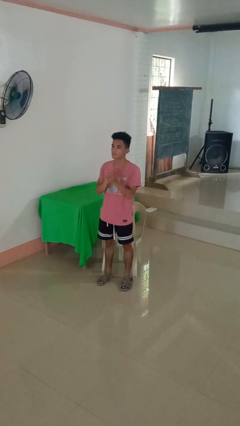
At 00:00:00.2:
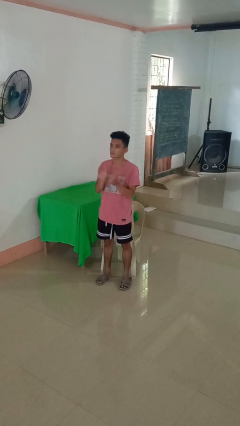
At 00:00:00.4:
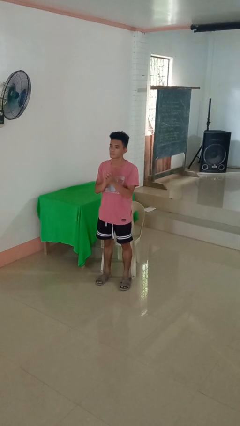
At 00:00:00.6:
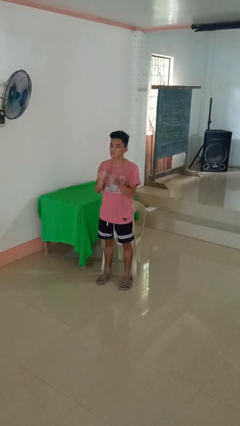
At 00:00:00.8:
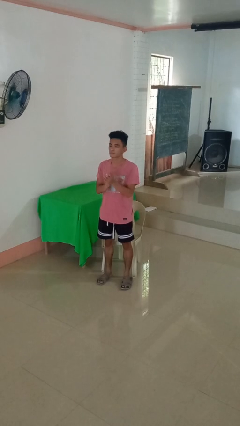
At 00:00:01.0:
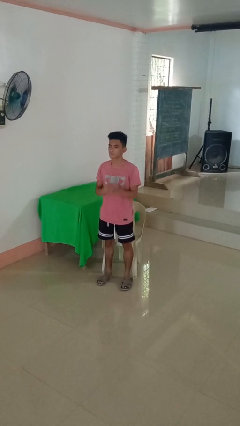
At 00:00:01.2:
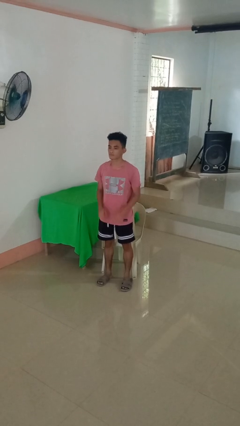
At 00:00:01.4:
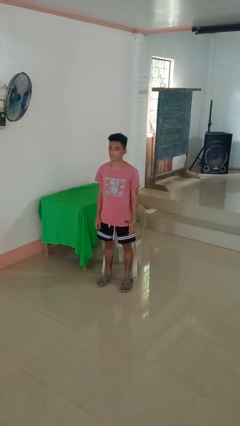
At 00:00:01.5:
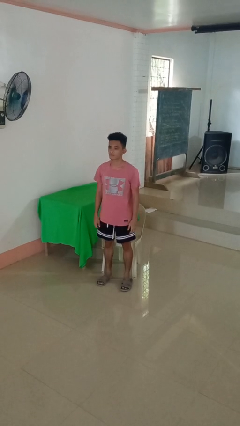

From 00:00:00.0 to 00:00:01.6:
person claps hands

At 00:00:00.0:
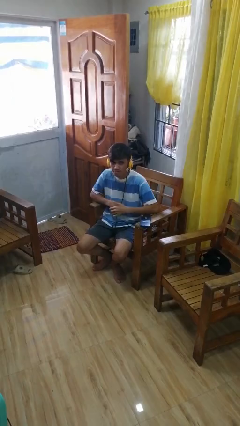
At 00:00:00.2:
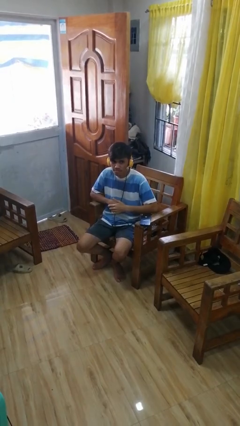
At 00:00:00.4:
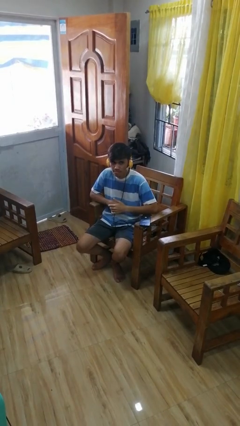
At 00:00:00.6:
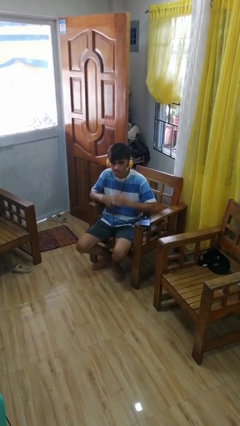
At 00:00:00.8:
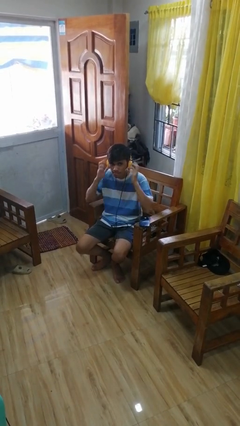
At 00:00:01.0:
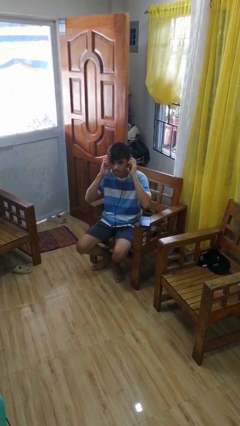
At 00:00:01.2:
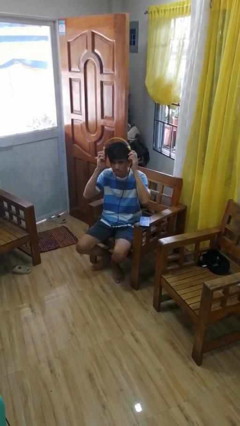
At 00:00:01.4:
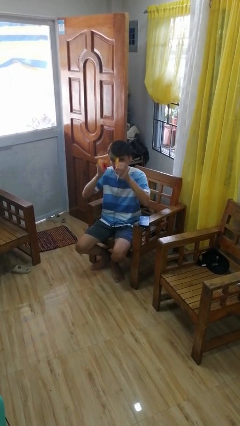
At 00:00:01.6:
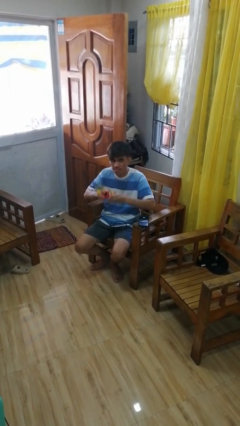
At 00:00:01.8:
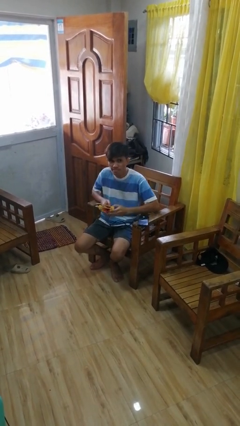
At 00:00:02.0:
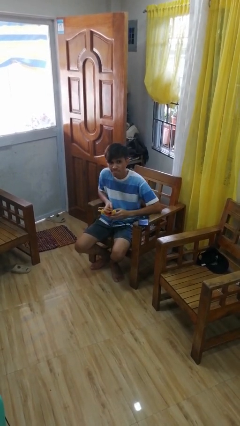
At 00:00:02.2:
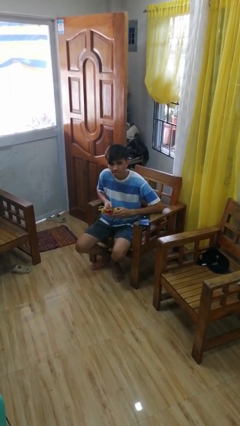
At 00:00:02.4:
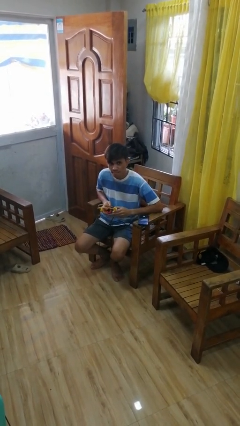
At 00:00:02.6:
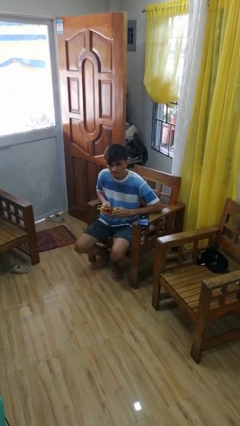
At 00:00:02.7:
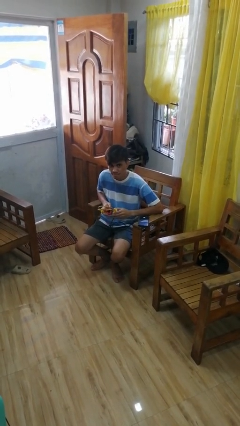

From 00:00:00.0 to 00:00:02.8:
person takes off headphones

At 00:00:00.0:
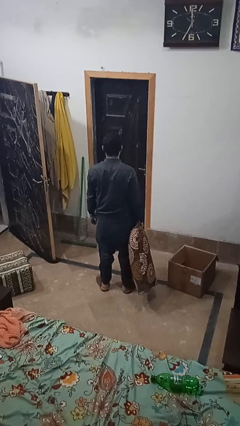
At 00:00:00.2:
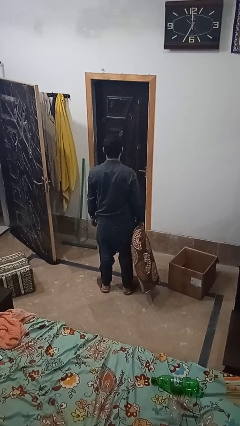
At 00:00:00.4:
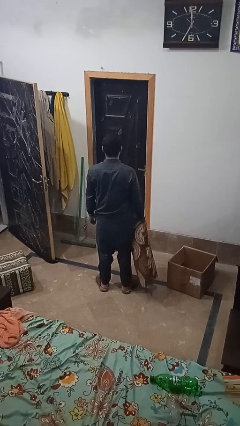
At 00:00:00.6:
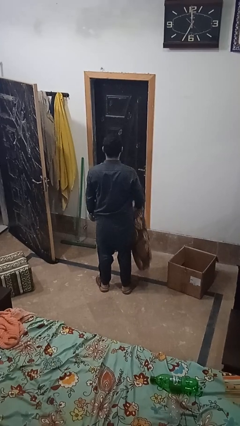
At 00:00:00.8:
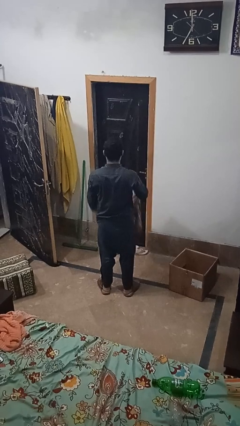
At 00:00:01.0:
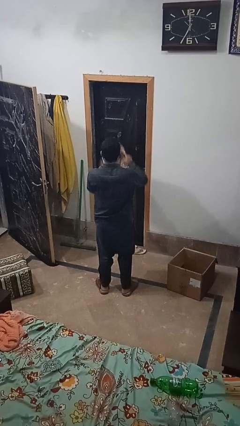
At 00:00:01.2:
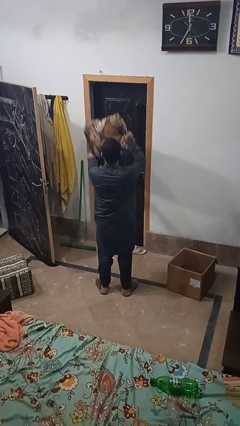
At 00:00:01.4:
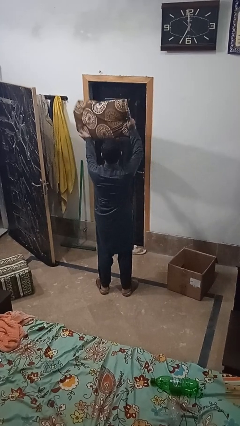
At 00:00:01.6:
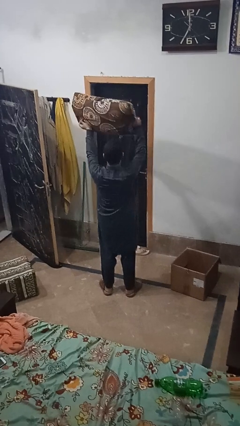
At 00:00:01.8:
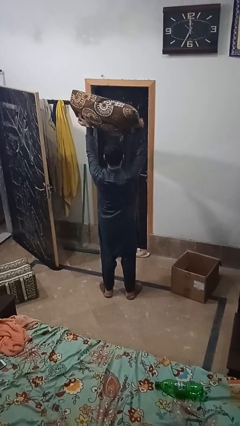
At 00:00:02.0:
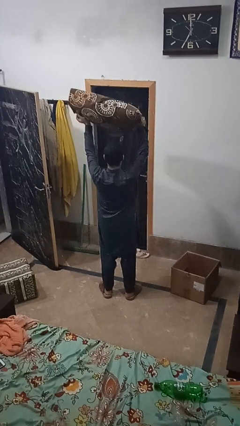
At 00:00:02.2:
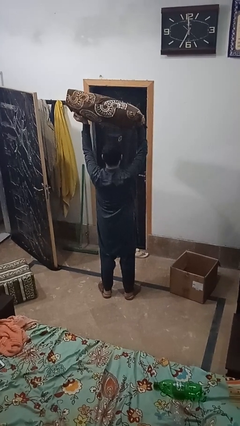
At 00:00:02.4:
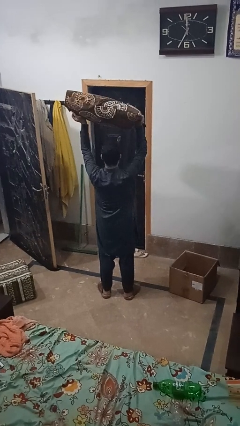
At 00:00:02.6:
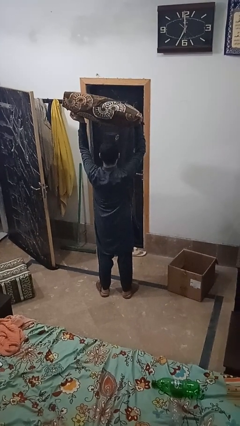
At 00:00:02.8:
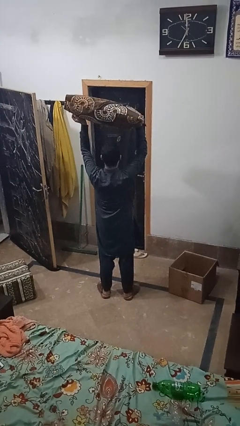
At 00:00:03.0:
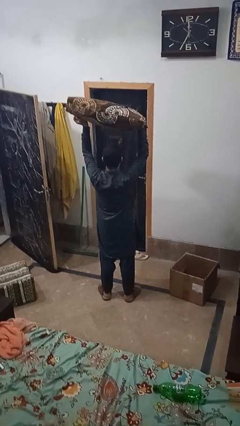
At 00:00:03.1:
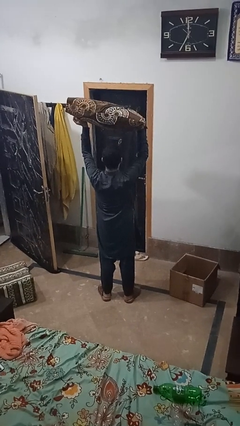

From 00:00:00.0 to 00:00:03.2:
person holds object above head

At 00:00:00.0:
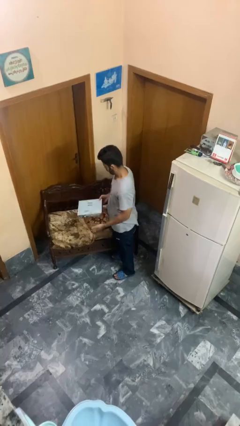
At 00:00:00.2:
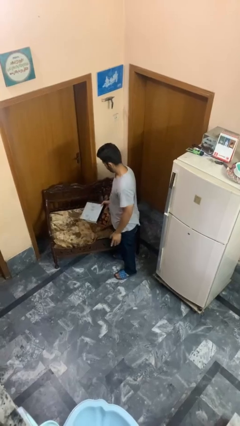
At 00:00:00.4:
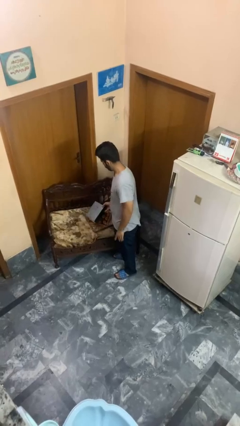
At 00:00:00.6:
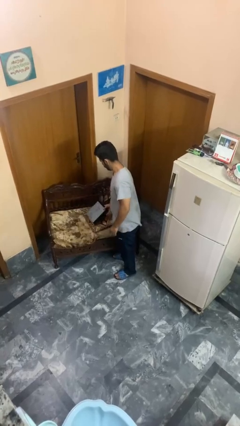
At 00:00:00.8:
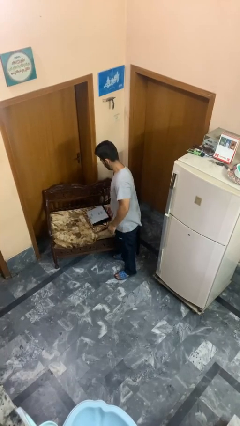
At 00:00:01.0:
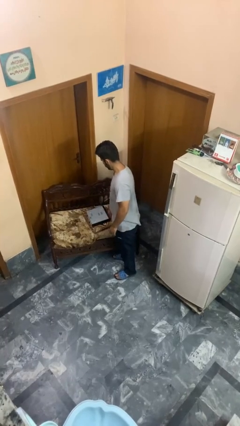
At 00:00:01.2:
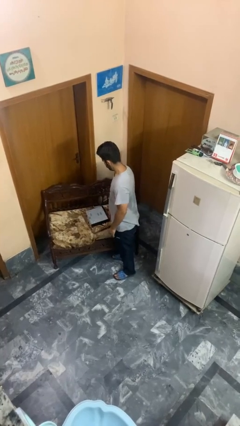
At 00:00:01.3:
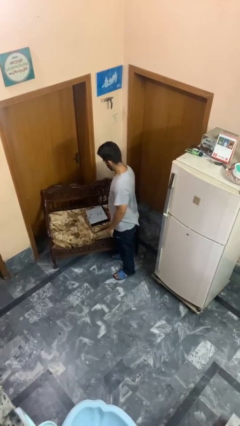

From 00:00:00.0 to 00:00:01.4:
person puts down object on couch

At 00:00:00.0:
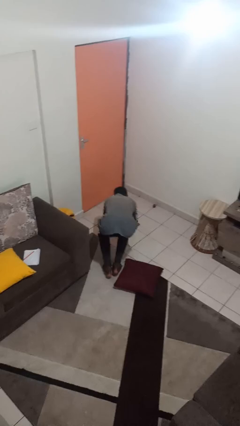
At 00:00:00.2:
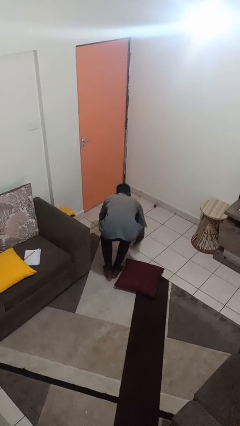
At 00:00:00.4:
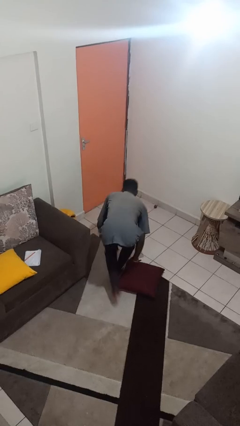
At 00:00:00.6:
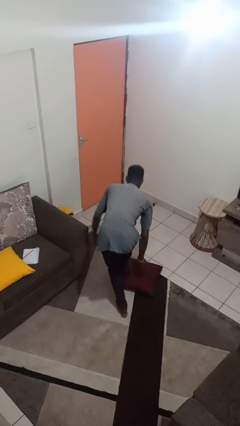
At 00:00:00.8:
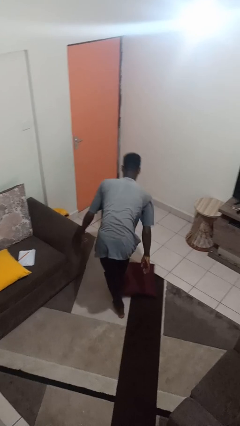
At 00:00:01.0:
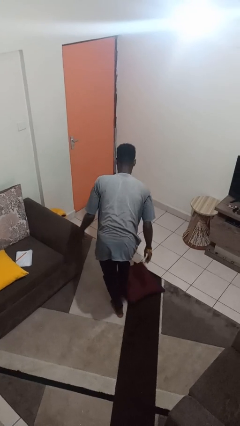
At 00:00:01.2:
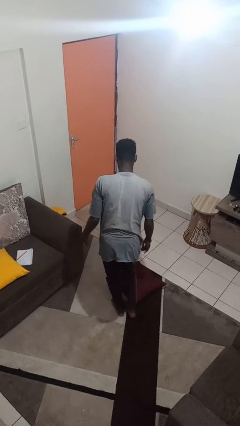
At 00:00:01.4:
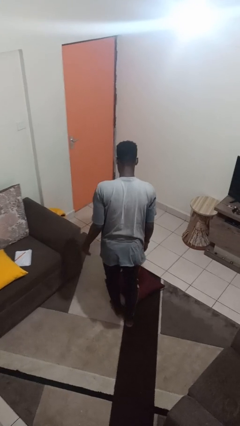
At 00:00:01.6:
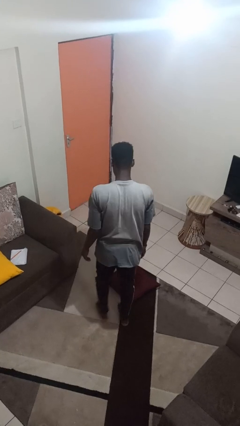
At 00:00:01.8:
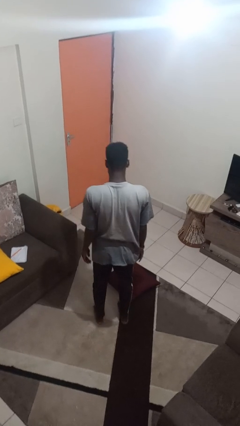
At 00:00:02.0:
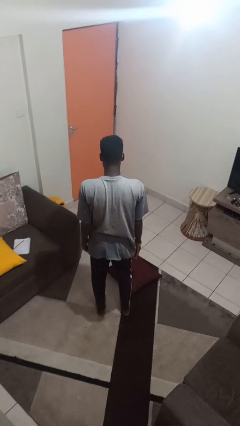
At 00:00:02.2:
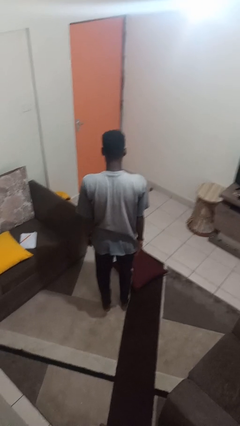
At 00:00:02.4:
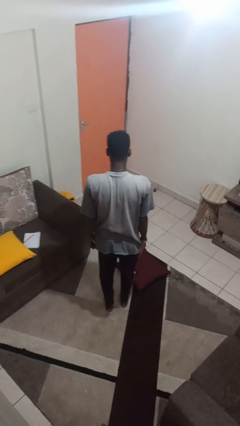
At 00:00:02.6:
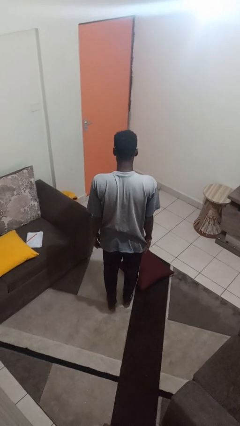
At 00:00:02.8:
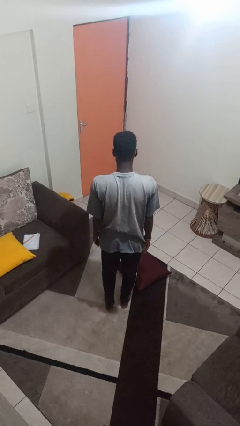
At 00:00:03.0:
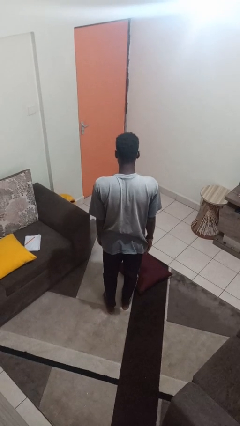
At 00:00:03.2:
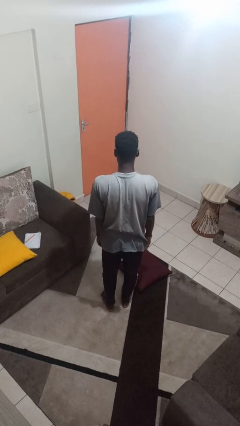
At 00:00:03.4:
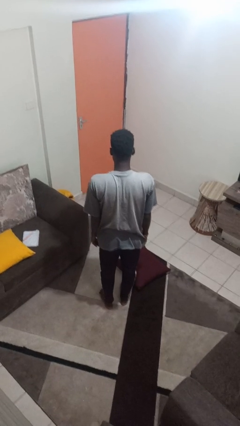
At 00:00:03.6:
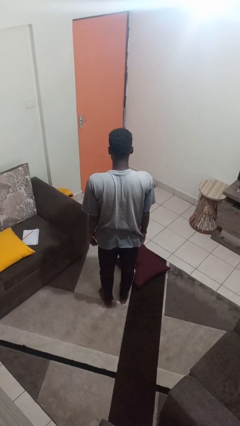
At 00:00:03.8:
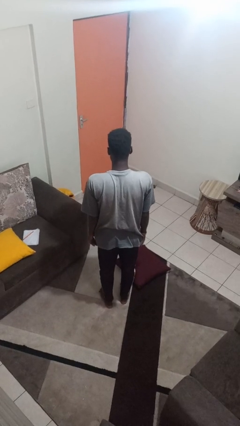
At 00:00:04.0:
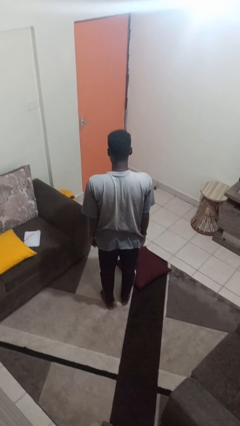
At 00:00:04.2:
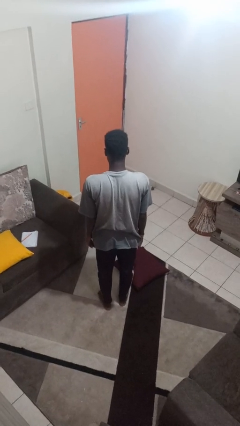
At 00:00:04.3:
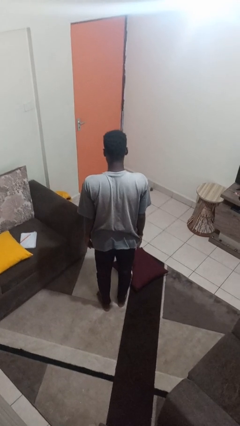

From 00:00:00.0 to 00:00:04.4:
person stands up from floor

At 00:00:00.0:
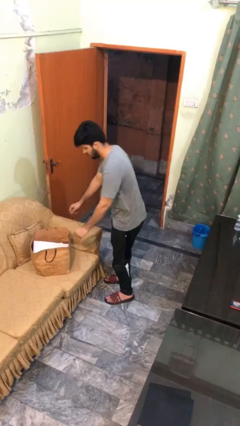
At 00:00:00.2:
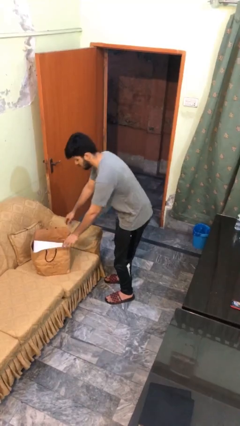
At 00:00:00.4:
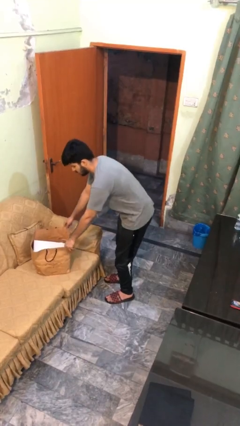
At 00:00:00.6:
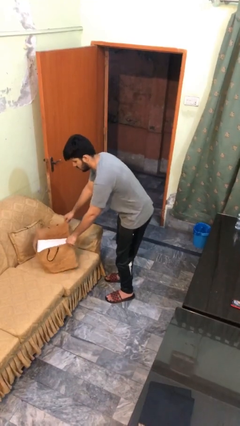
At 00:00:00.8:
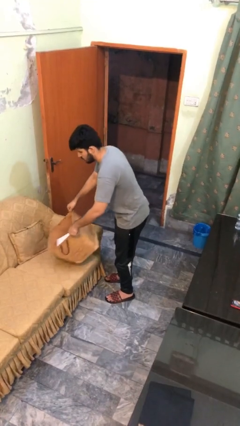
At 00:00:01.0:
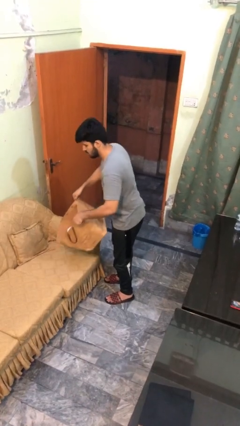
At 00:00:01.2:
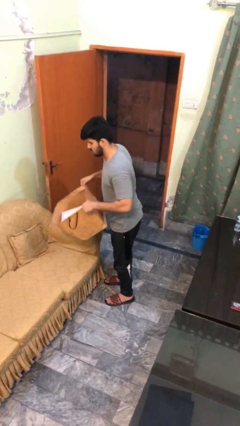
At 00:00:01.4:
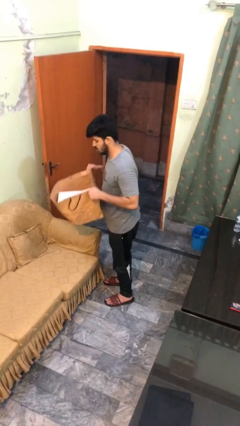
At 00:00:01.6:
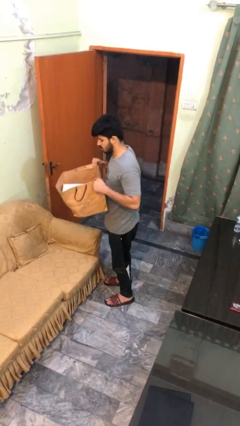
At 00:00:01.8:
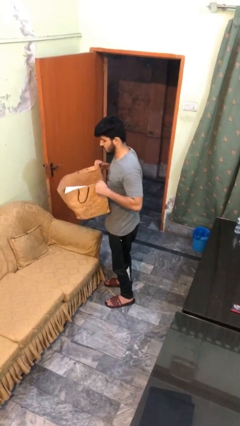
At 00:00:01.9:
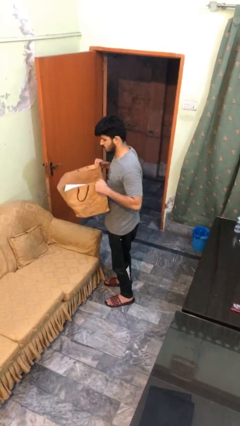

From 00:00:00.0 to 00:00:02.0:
person picks up object from couch

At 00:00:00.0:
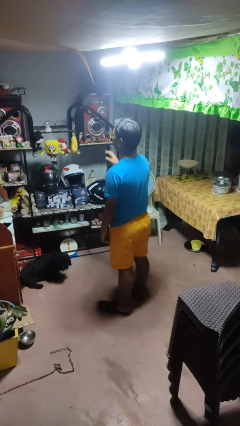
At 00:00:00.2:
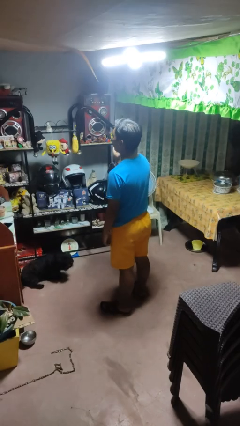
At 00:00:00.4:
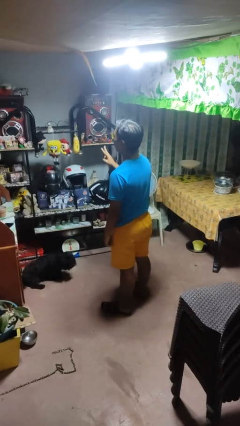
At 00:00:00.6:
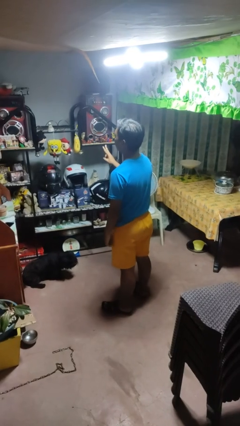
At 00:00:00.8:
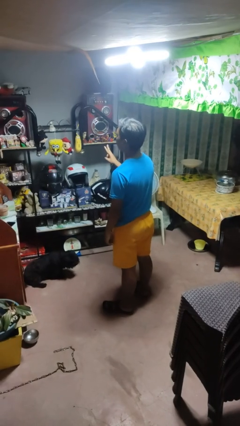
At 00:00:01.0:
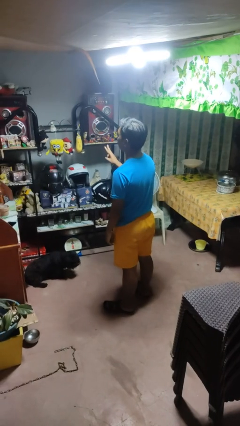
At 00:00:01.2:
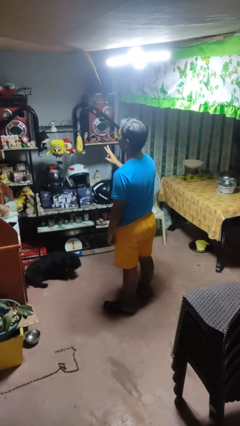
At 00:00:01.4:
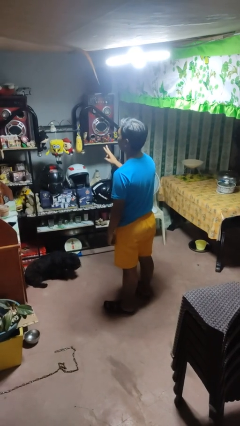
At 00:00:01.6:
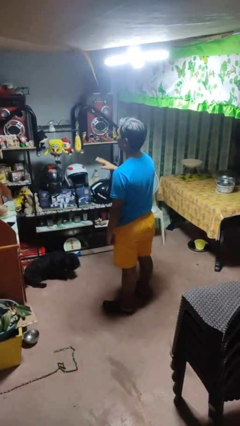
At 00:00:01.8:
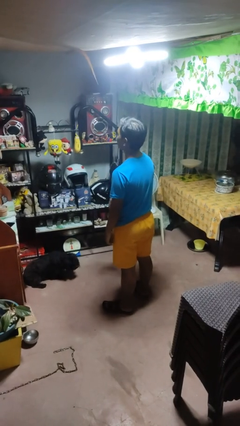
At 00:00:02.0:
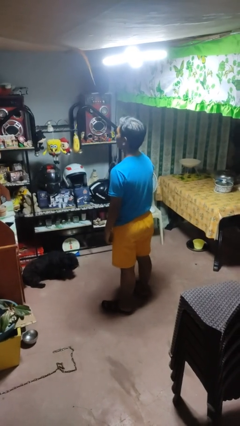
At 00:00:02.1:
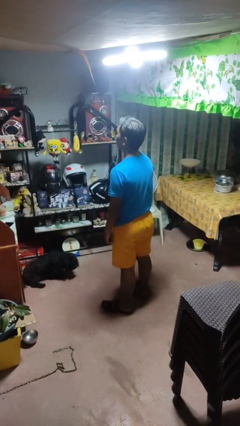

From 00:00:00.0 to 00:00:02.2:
person gestures peace
